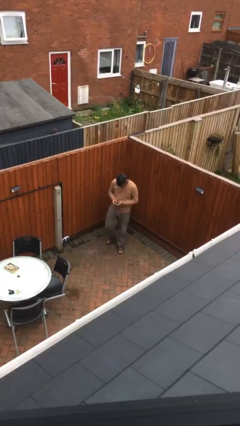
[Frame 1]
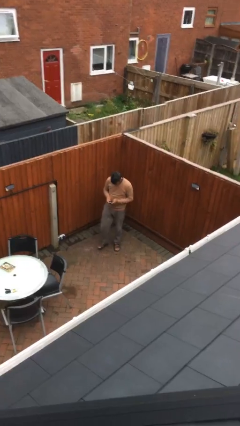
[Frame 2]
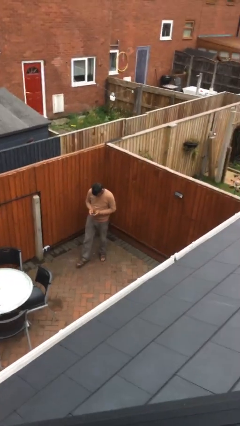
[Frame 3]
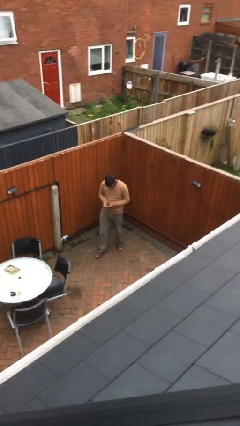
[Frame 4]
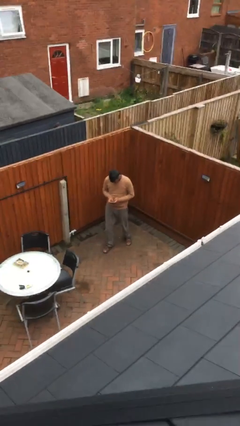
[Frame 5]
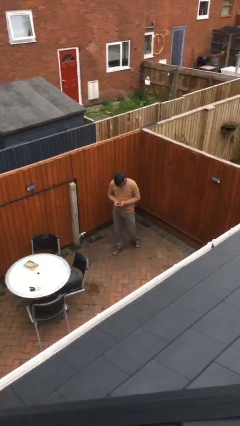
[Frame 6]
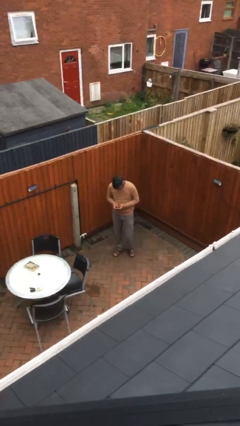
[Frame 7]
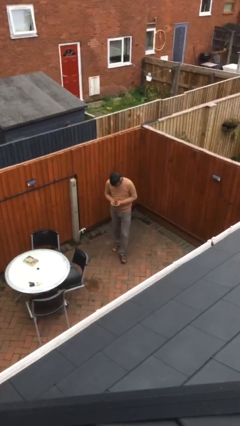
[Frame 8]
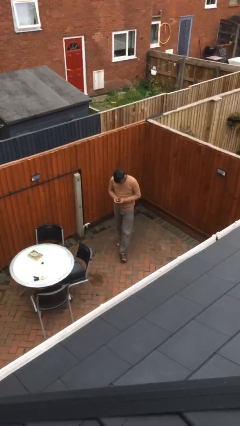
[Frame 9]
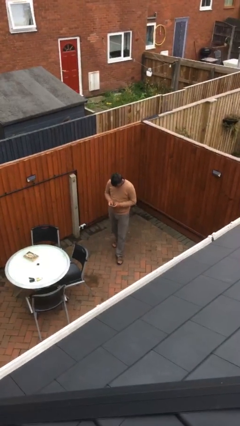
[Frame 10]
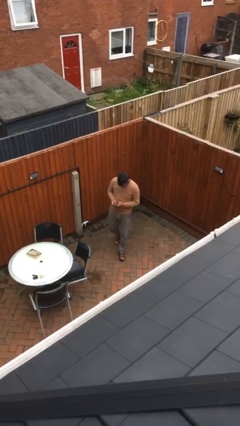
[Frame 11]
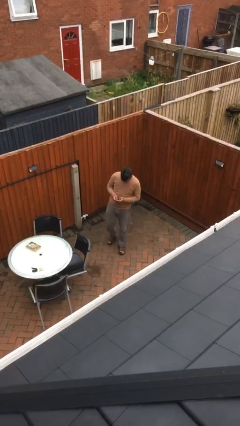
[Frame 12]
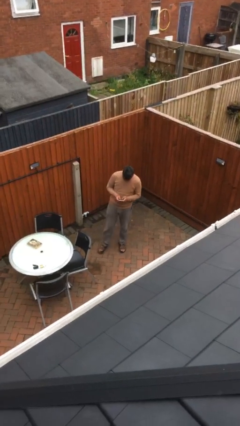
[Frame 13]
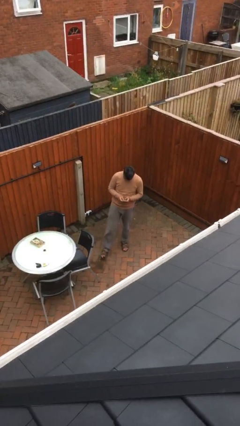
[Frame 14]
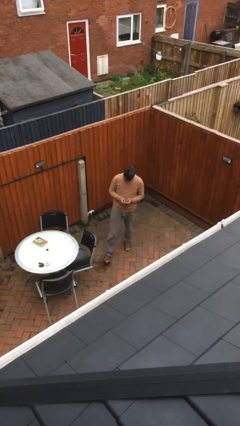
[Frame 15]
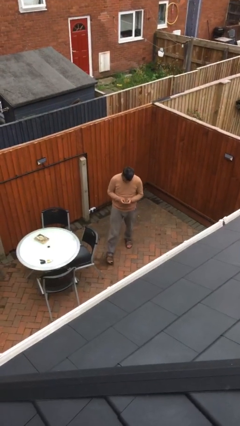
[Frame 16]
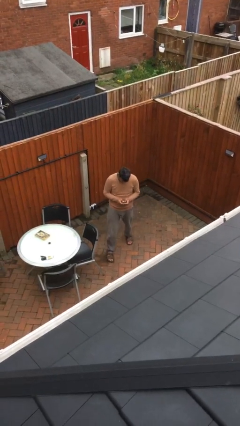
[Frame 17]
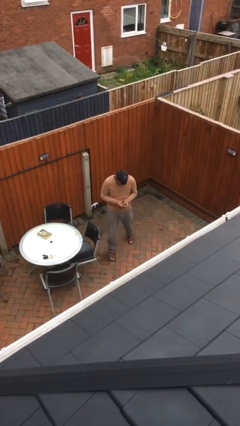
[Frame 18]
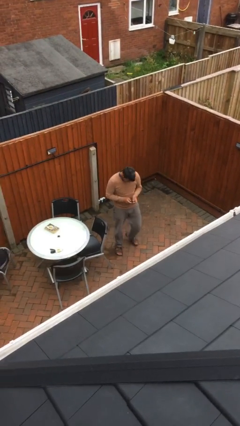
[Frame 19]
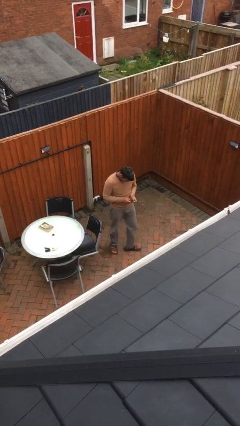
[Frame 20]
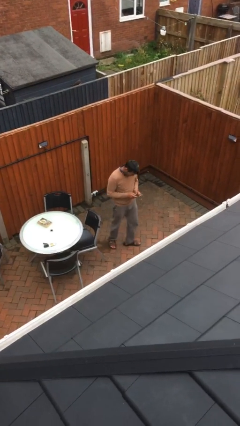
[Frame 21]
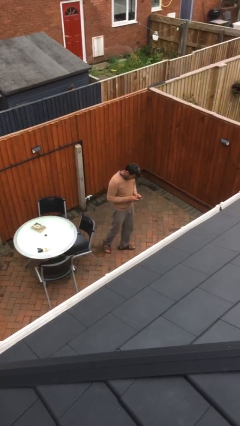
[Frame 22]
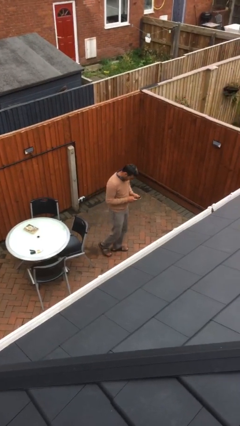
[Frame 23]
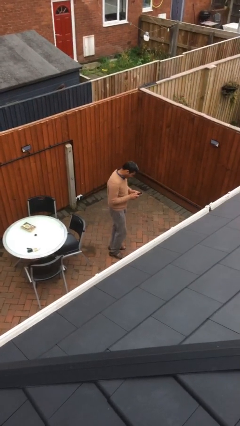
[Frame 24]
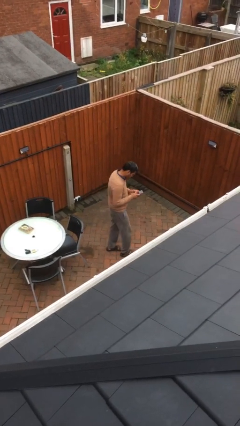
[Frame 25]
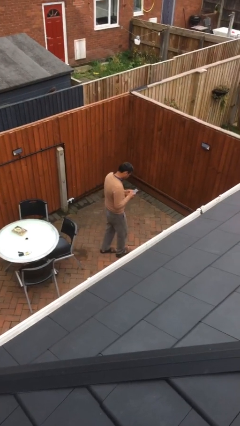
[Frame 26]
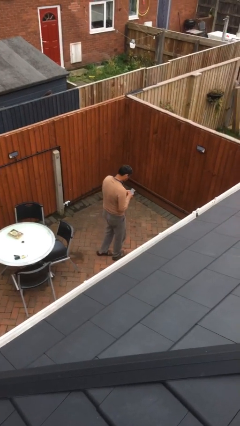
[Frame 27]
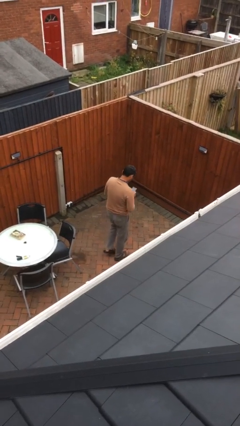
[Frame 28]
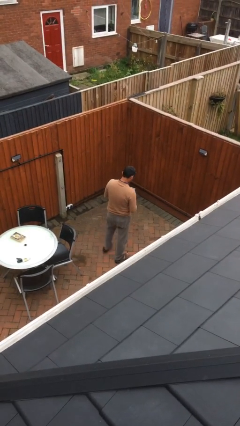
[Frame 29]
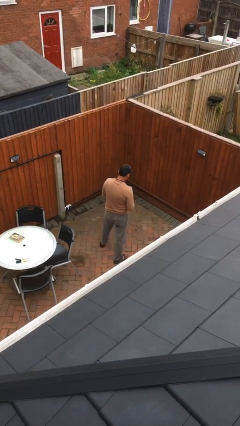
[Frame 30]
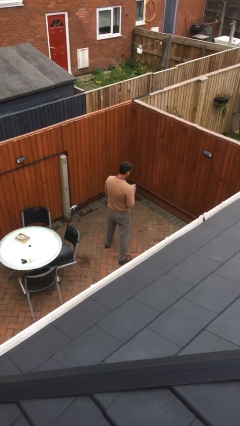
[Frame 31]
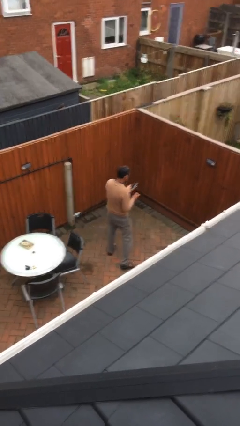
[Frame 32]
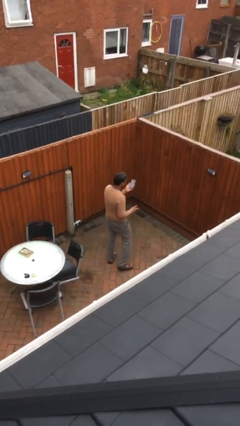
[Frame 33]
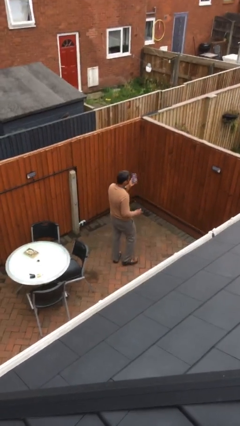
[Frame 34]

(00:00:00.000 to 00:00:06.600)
person texts on phone

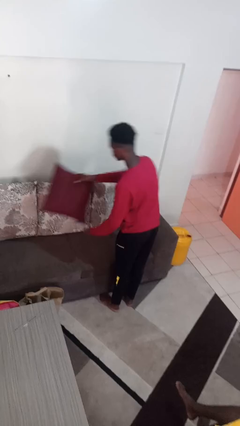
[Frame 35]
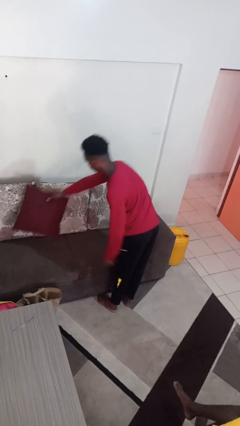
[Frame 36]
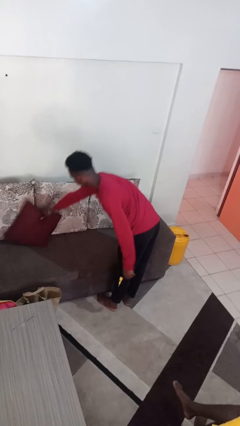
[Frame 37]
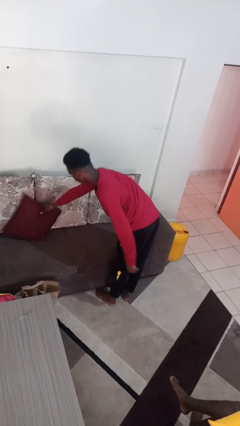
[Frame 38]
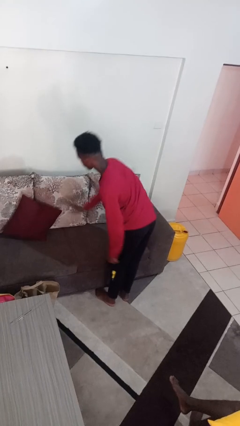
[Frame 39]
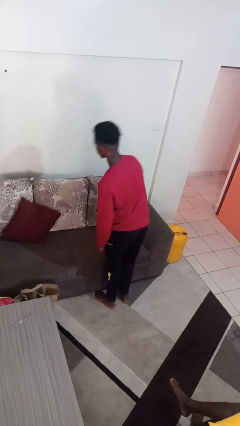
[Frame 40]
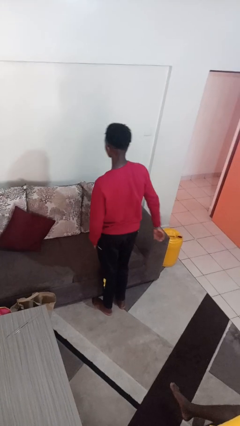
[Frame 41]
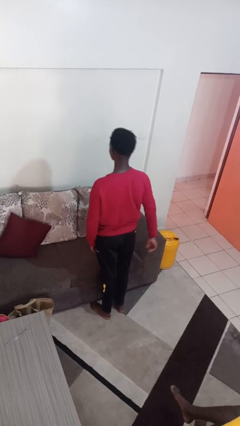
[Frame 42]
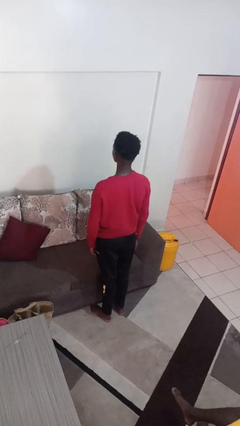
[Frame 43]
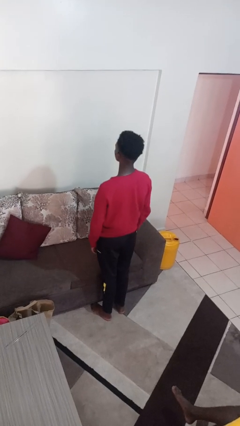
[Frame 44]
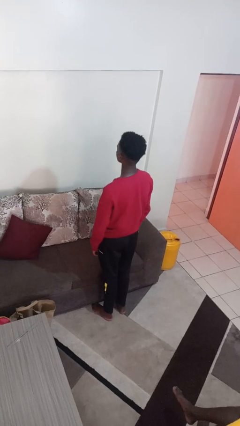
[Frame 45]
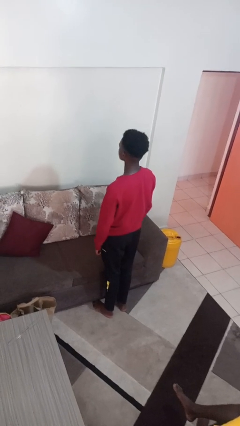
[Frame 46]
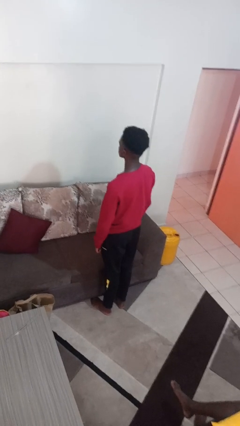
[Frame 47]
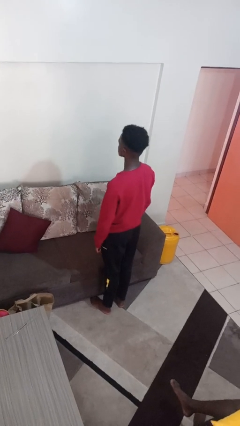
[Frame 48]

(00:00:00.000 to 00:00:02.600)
person puts down object on couch

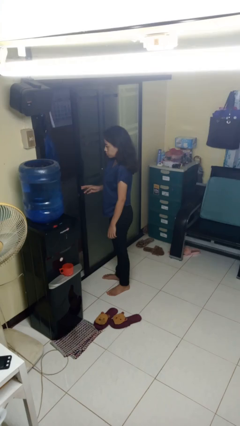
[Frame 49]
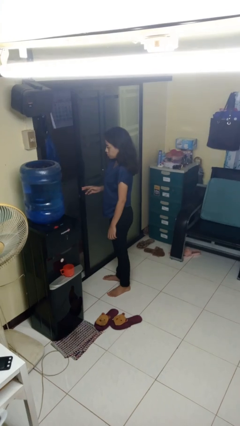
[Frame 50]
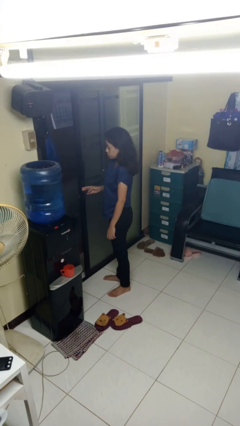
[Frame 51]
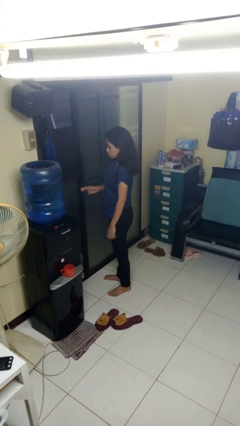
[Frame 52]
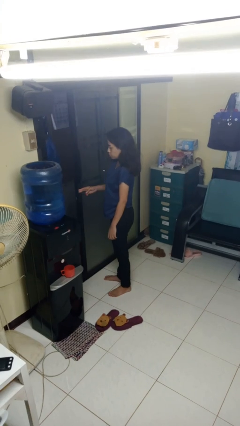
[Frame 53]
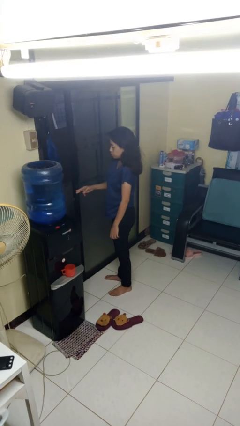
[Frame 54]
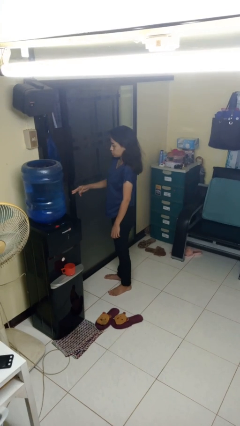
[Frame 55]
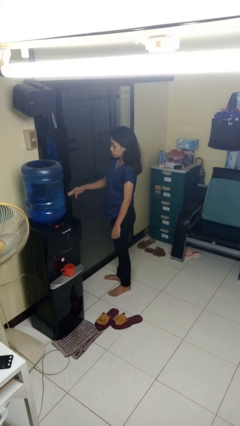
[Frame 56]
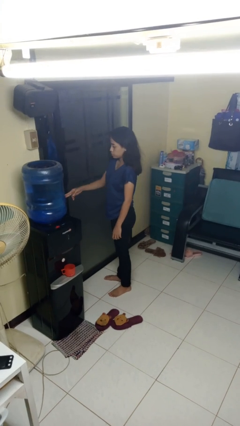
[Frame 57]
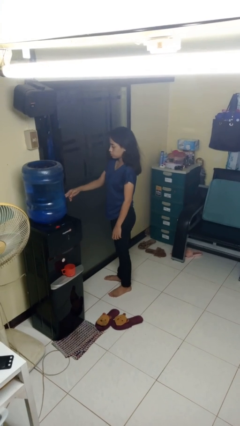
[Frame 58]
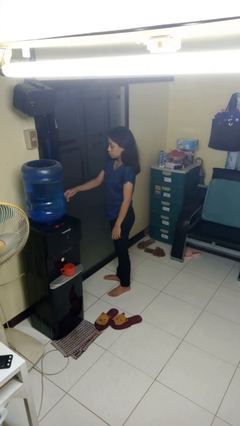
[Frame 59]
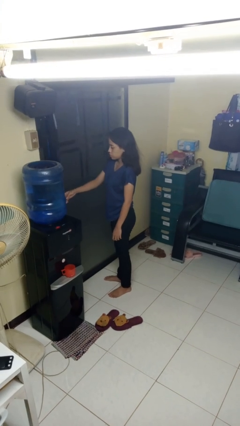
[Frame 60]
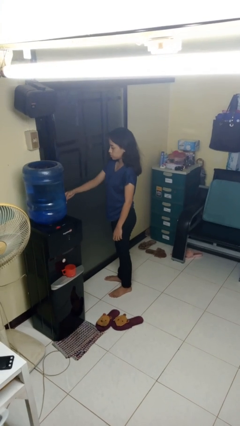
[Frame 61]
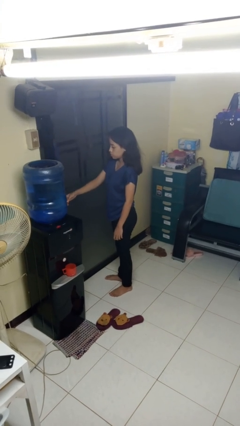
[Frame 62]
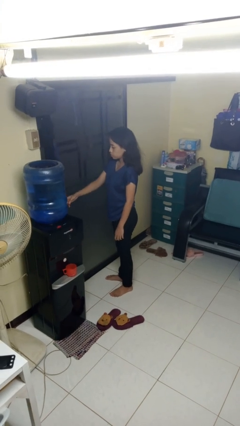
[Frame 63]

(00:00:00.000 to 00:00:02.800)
person closes sliding door

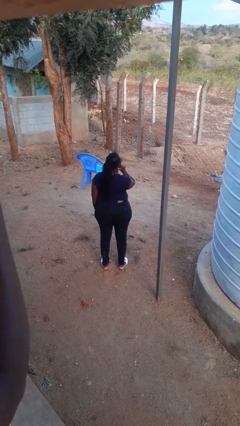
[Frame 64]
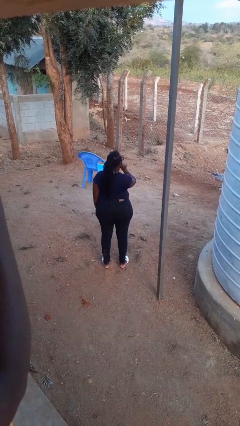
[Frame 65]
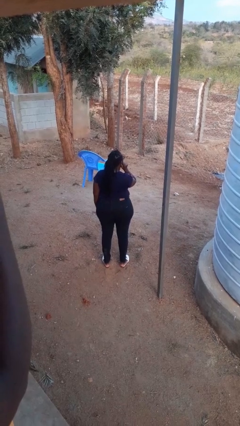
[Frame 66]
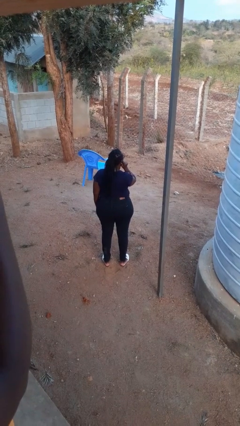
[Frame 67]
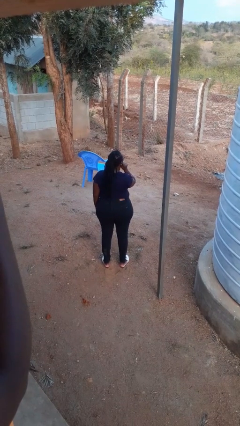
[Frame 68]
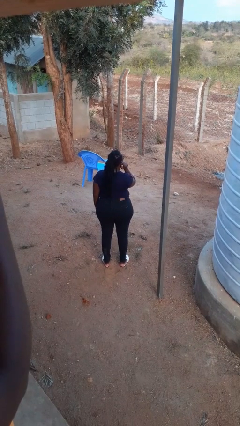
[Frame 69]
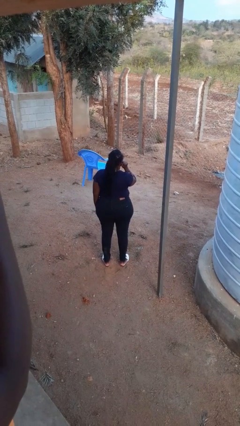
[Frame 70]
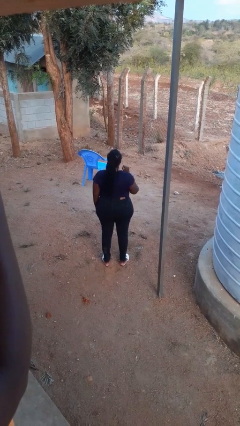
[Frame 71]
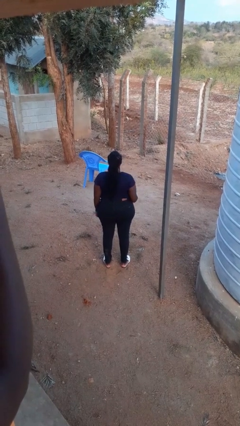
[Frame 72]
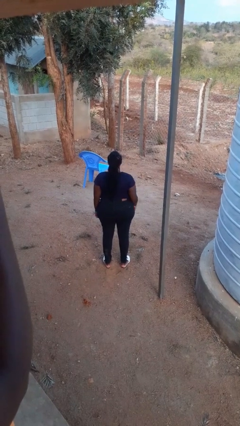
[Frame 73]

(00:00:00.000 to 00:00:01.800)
person touches earlobe

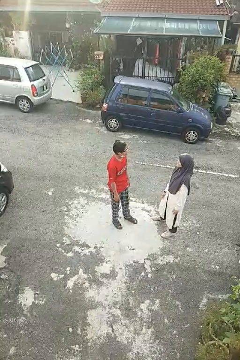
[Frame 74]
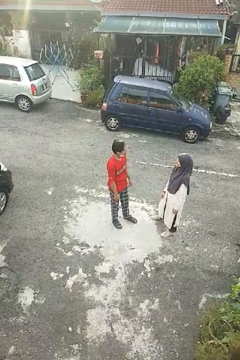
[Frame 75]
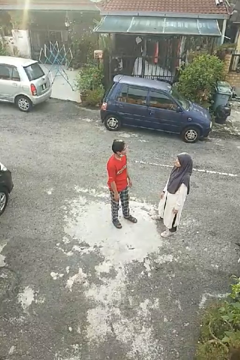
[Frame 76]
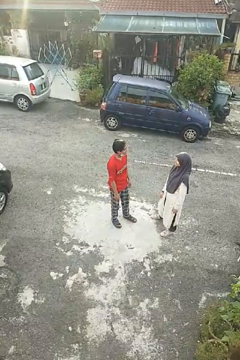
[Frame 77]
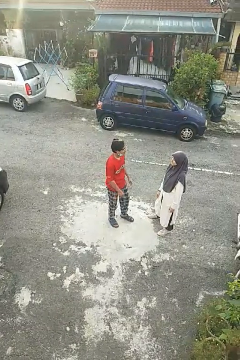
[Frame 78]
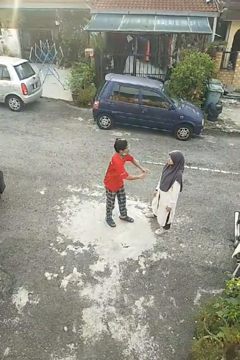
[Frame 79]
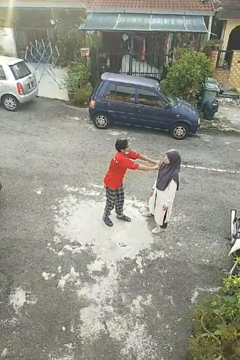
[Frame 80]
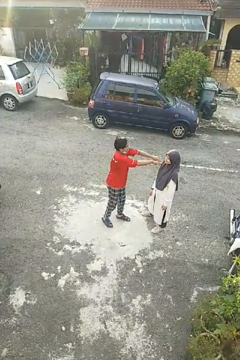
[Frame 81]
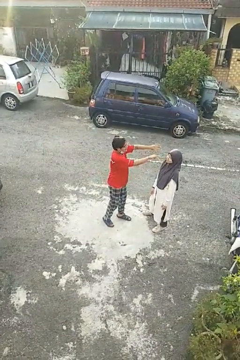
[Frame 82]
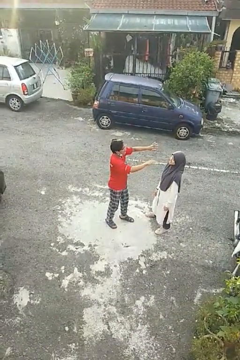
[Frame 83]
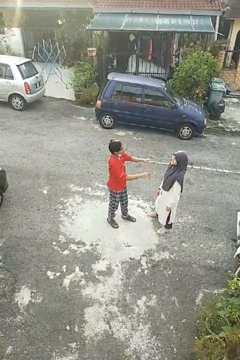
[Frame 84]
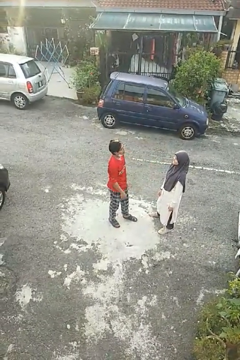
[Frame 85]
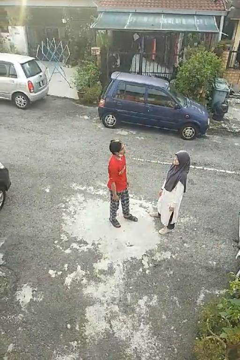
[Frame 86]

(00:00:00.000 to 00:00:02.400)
person shoves person

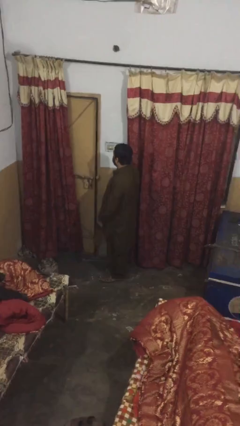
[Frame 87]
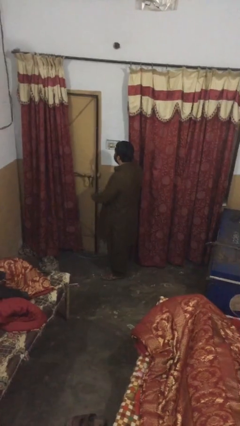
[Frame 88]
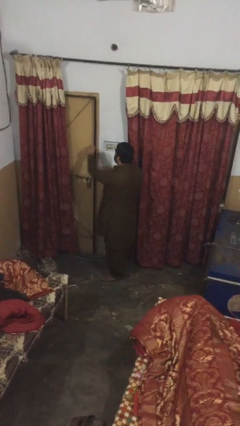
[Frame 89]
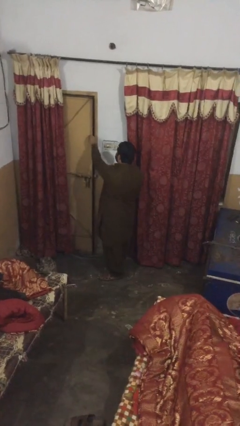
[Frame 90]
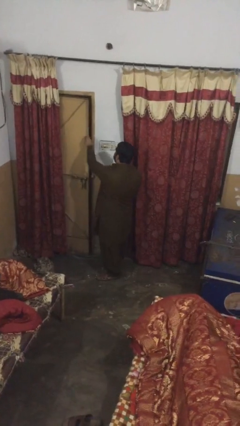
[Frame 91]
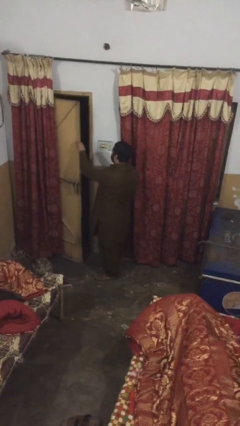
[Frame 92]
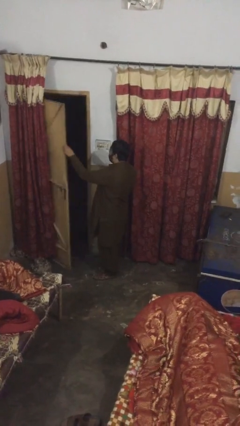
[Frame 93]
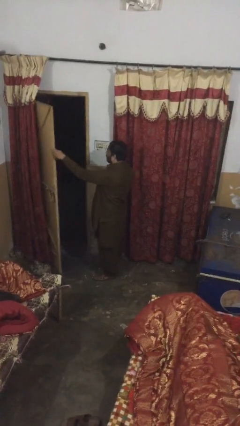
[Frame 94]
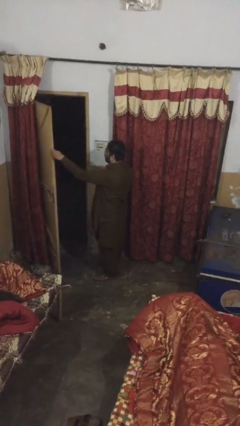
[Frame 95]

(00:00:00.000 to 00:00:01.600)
person opens facility door
